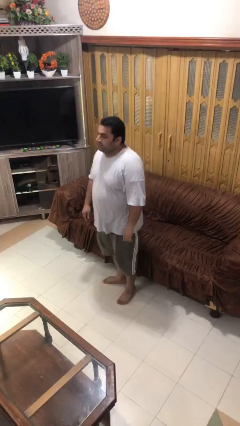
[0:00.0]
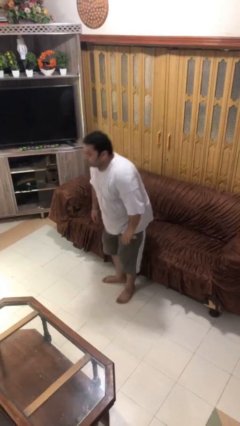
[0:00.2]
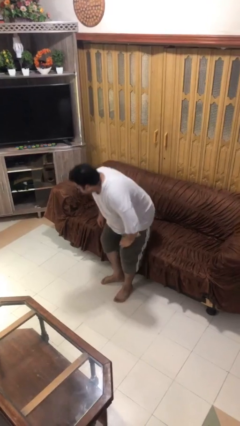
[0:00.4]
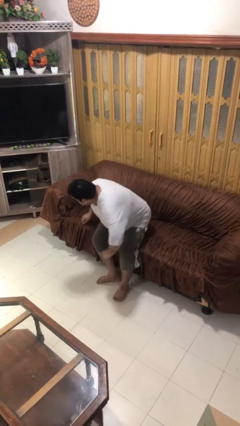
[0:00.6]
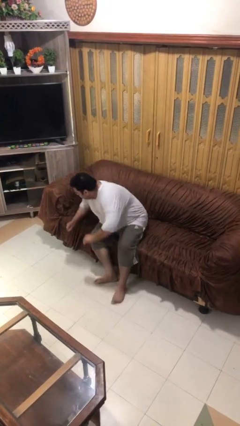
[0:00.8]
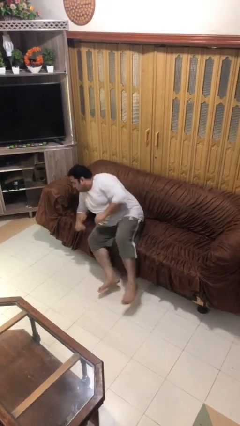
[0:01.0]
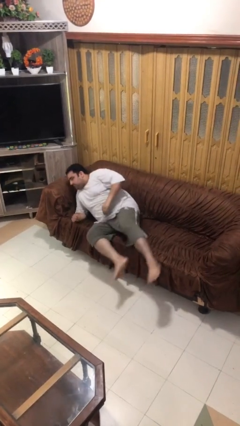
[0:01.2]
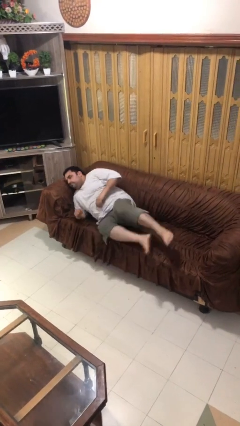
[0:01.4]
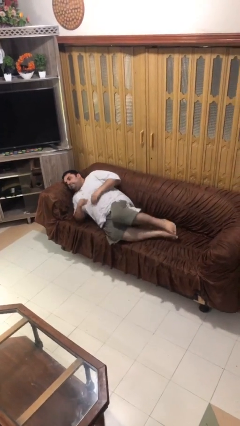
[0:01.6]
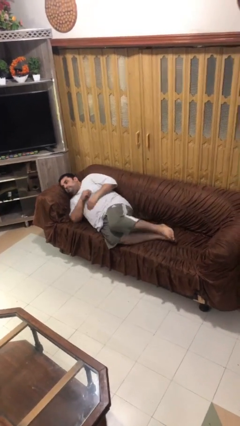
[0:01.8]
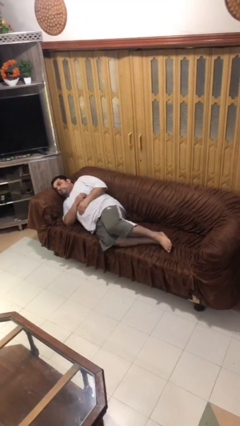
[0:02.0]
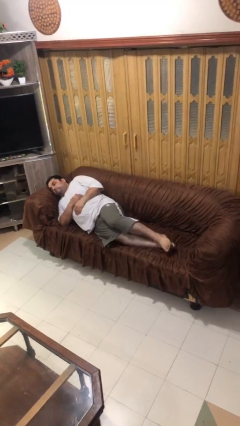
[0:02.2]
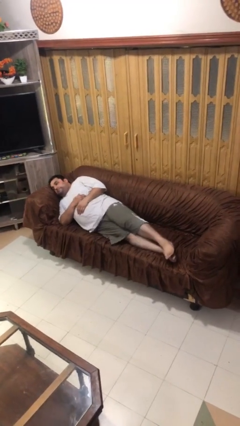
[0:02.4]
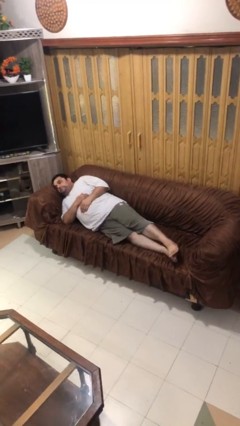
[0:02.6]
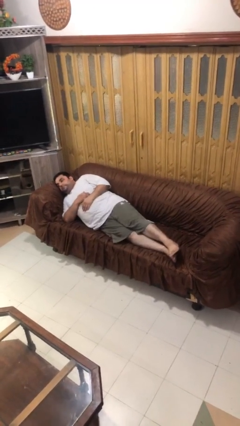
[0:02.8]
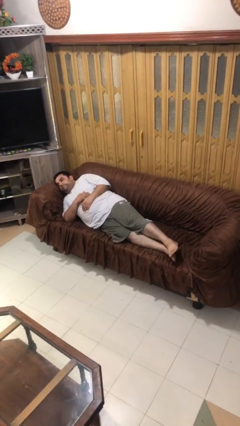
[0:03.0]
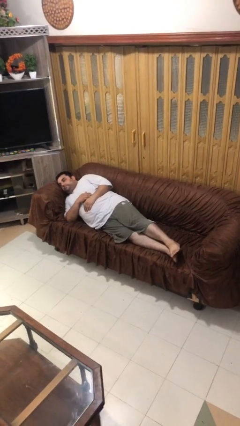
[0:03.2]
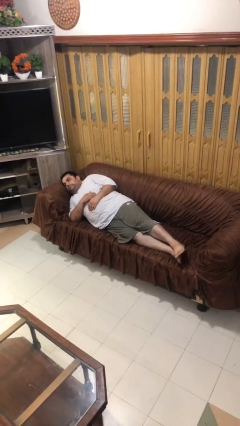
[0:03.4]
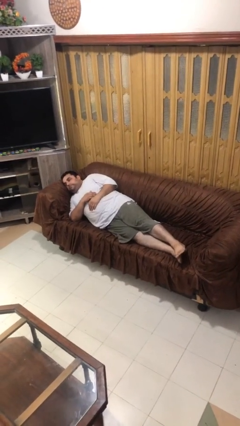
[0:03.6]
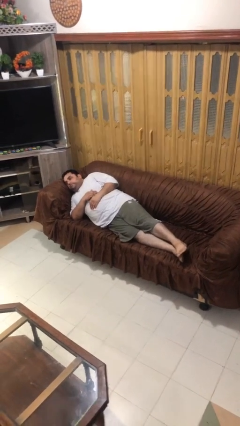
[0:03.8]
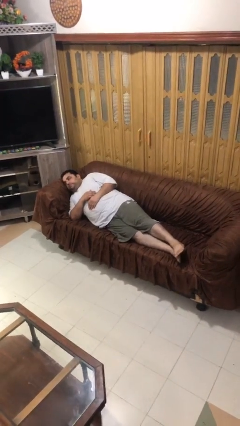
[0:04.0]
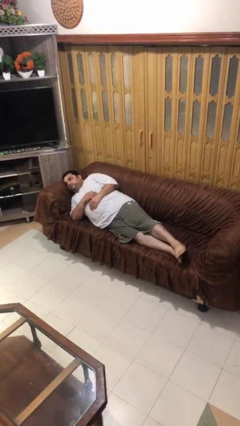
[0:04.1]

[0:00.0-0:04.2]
person lies down on couch

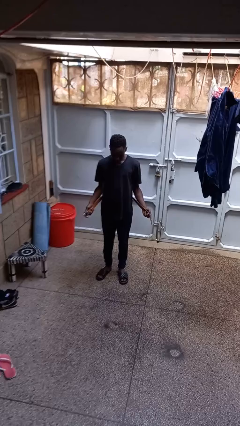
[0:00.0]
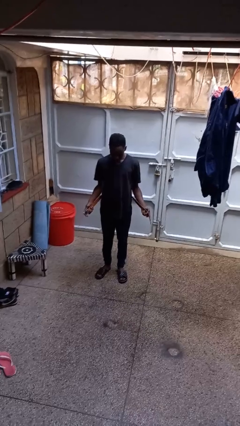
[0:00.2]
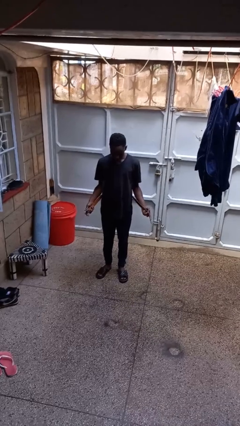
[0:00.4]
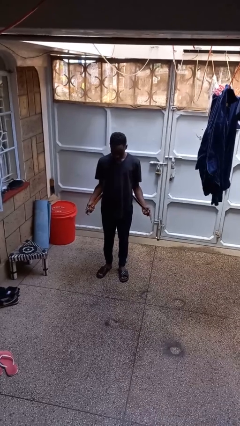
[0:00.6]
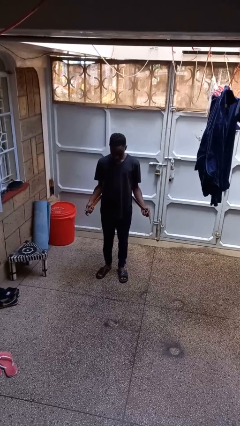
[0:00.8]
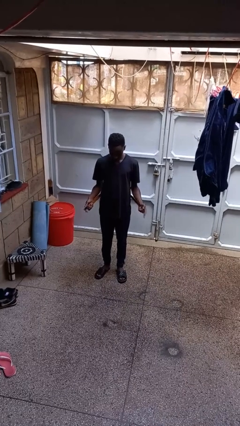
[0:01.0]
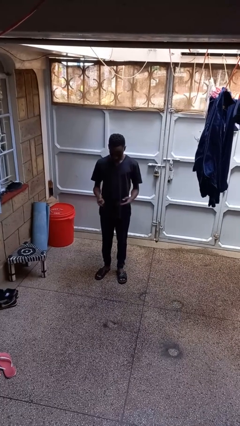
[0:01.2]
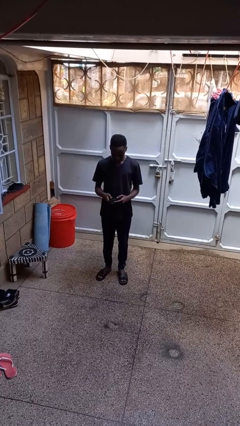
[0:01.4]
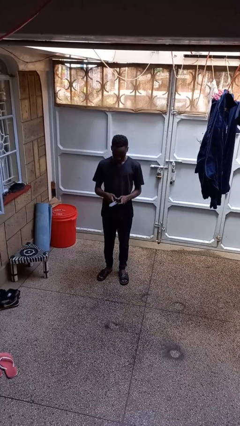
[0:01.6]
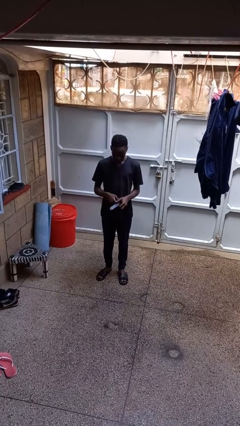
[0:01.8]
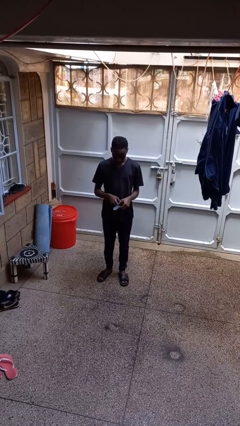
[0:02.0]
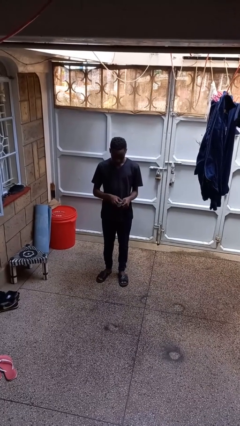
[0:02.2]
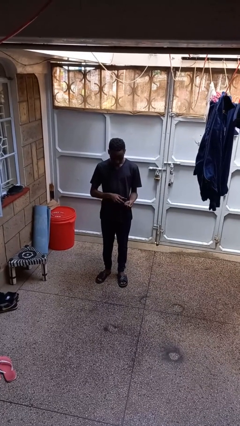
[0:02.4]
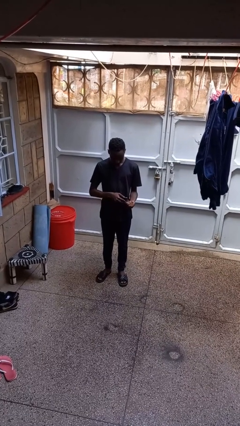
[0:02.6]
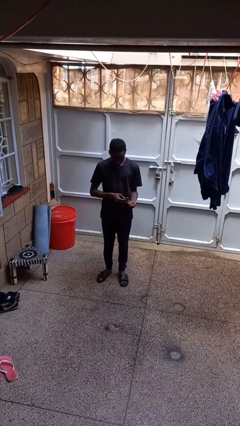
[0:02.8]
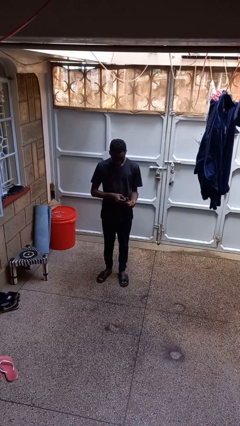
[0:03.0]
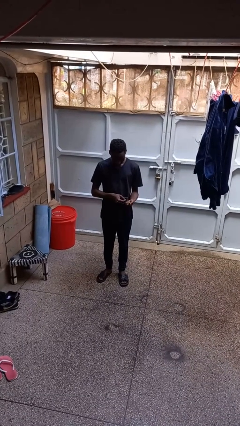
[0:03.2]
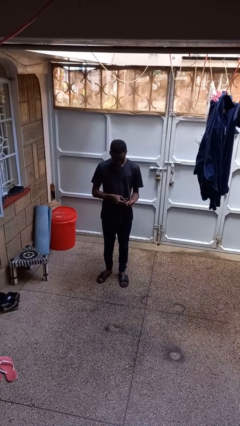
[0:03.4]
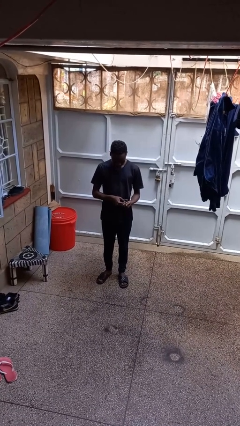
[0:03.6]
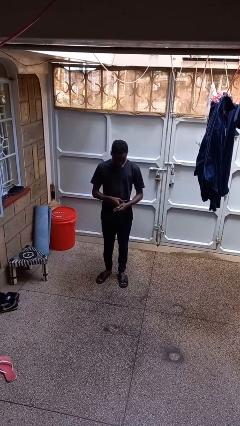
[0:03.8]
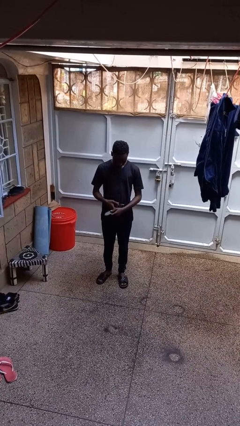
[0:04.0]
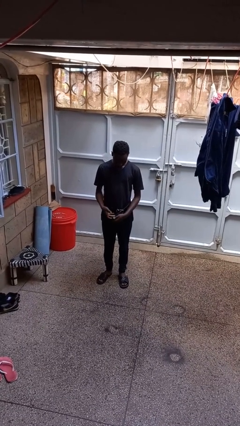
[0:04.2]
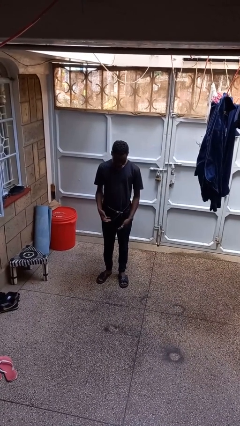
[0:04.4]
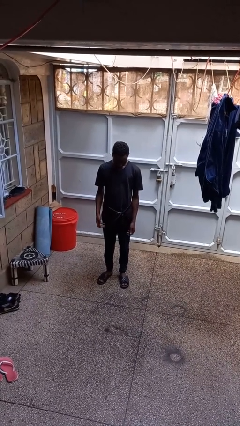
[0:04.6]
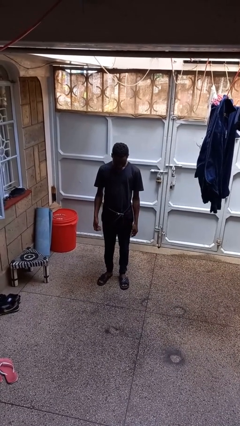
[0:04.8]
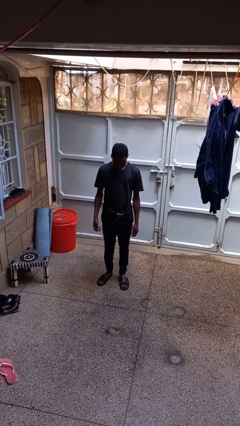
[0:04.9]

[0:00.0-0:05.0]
person puts on belt

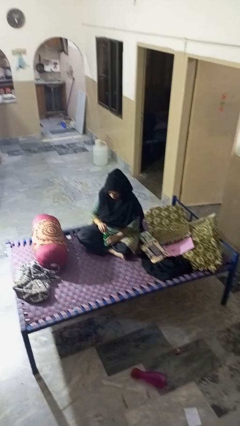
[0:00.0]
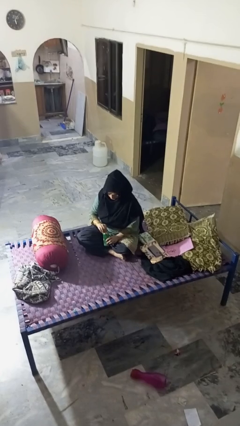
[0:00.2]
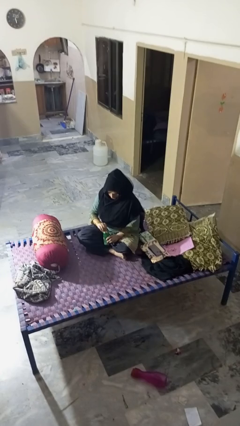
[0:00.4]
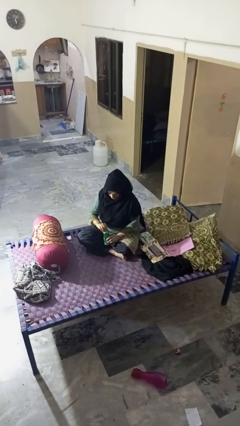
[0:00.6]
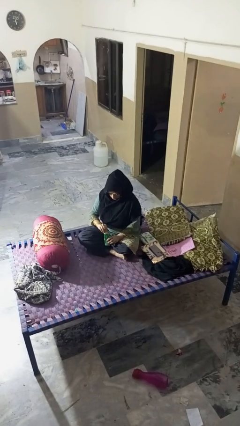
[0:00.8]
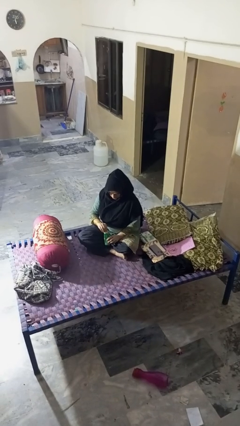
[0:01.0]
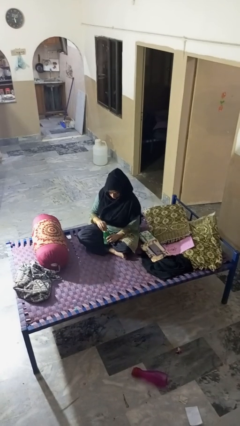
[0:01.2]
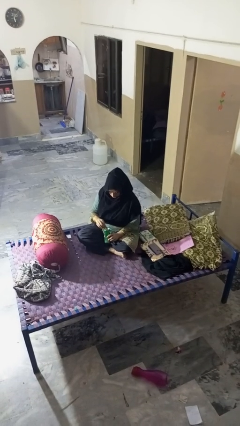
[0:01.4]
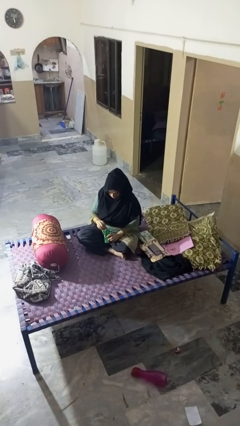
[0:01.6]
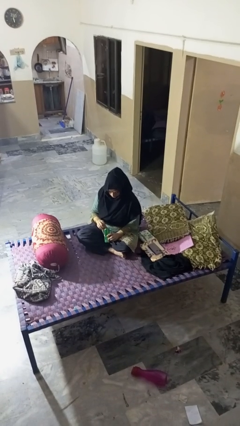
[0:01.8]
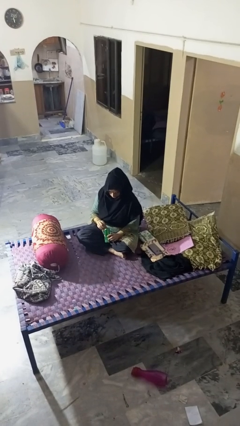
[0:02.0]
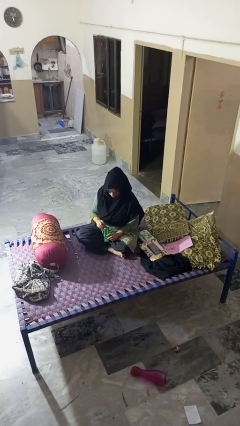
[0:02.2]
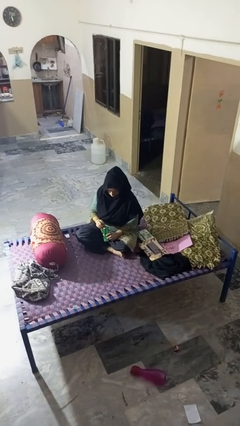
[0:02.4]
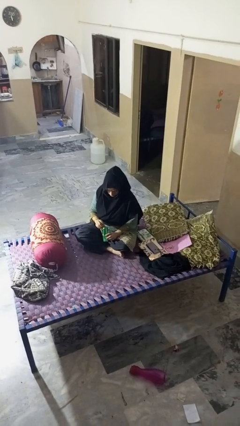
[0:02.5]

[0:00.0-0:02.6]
person opens can with can opener

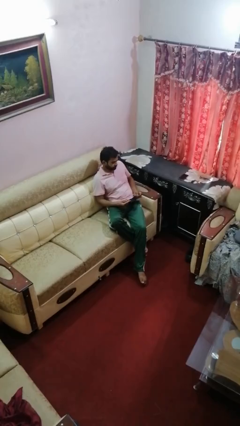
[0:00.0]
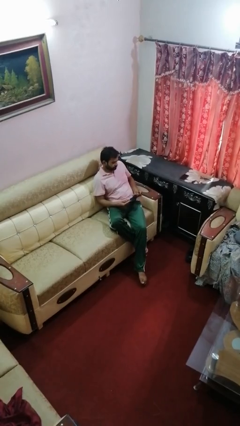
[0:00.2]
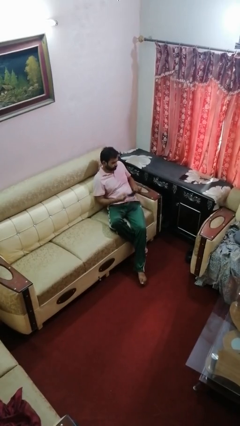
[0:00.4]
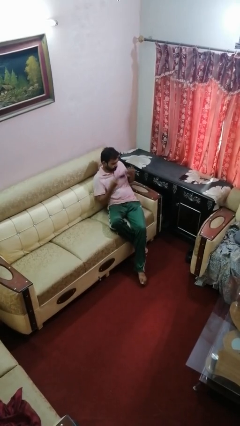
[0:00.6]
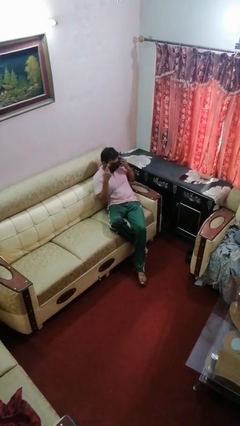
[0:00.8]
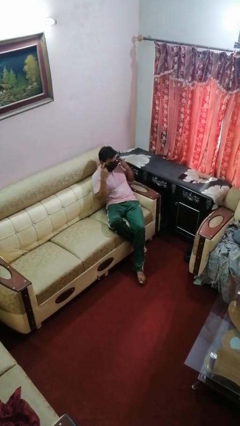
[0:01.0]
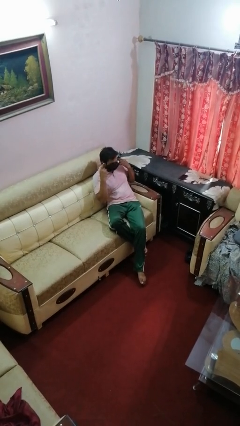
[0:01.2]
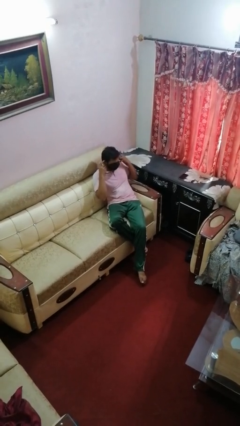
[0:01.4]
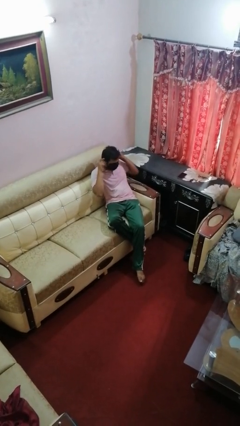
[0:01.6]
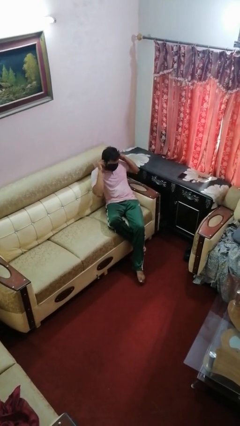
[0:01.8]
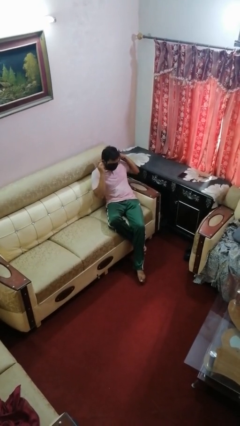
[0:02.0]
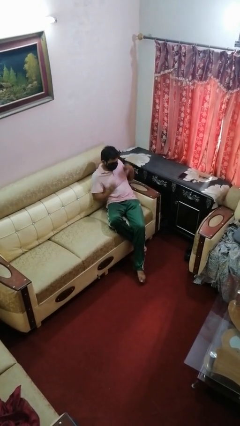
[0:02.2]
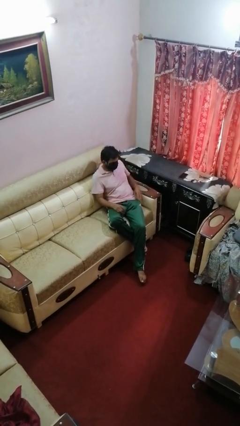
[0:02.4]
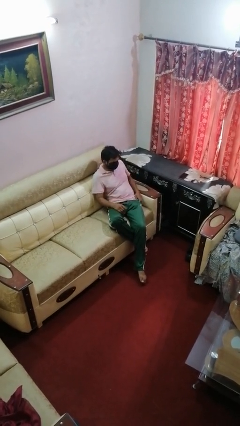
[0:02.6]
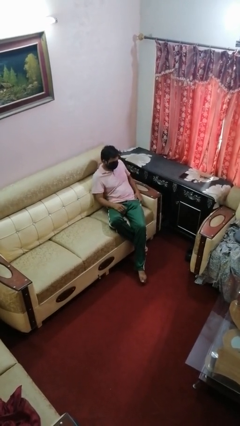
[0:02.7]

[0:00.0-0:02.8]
person puts on facemask

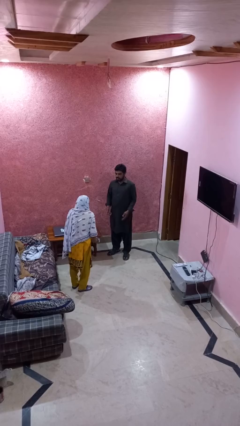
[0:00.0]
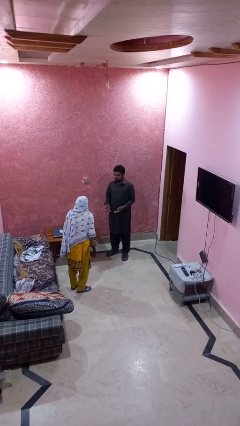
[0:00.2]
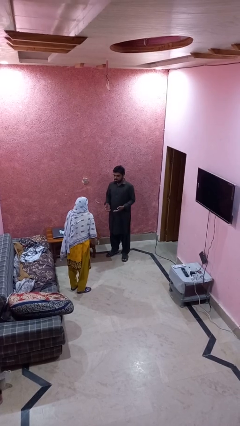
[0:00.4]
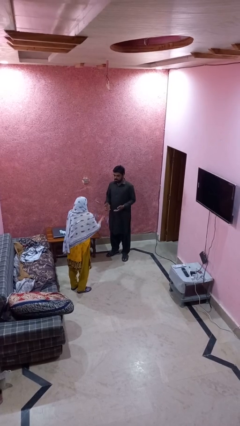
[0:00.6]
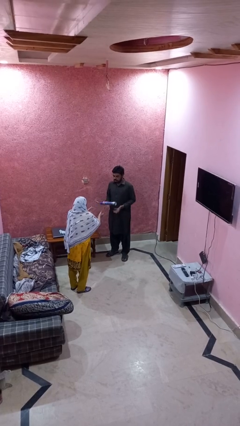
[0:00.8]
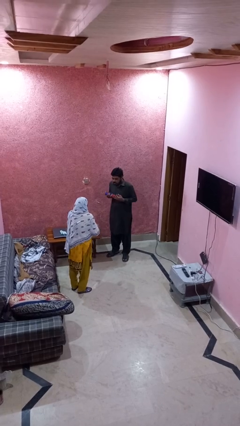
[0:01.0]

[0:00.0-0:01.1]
person throws object to person

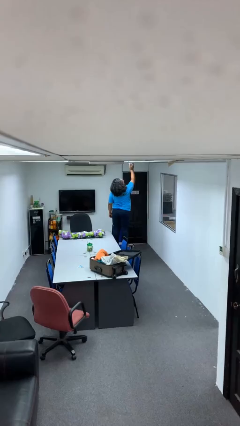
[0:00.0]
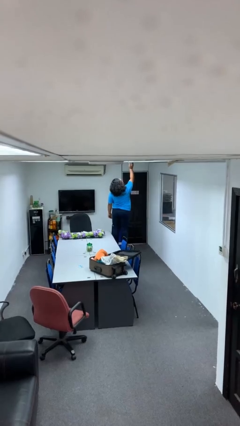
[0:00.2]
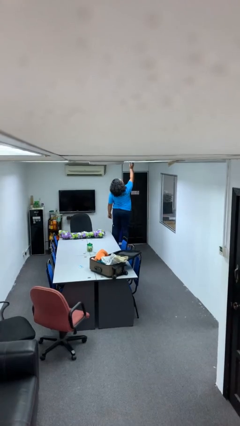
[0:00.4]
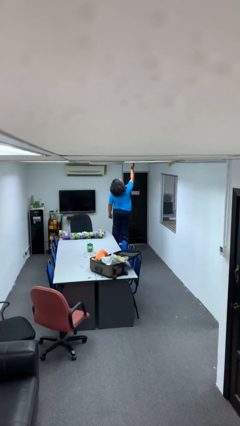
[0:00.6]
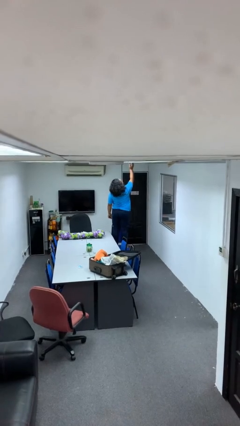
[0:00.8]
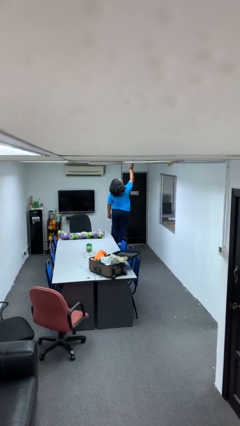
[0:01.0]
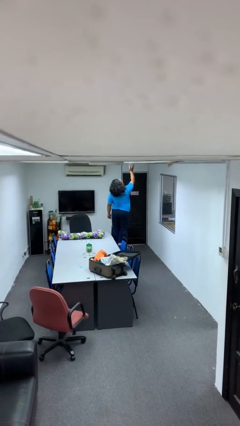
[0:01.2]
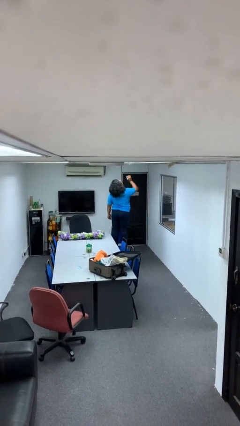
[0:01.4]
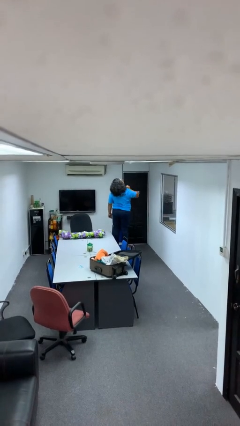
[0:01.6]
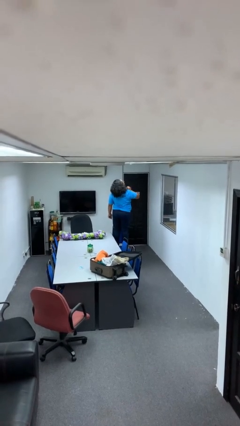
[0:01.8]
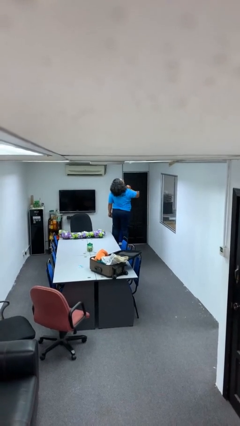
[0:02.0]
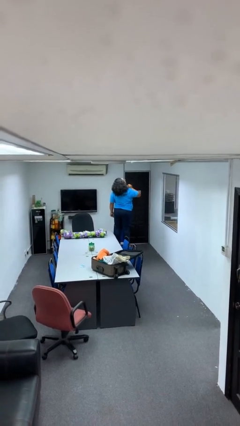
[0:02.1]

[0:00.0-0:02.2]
person puts up smoke detector
